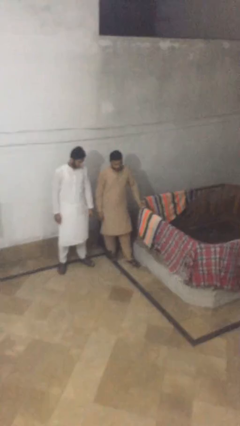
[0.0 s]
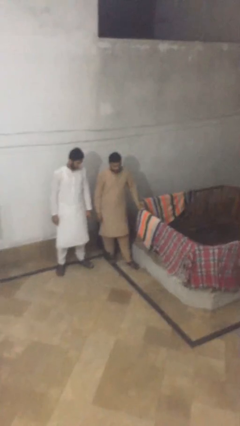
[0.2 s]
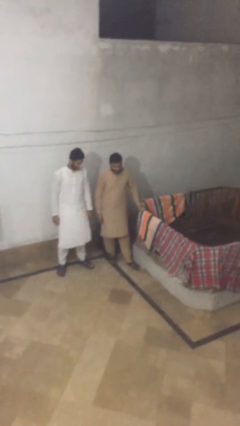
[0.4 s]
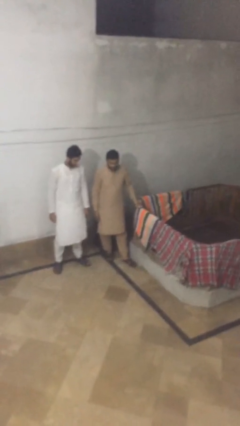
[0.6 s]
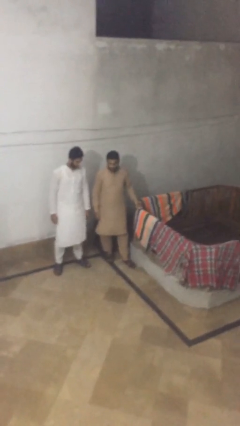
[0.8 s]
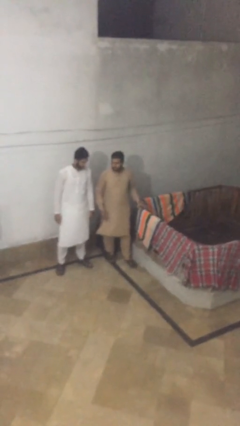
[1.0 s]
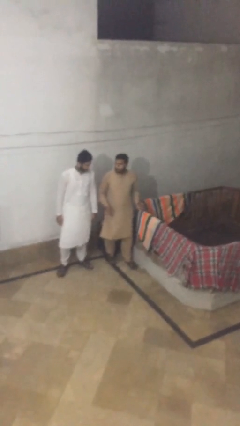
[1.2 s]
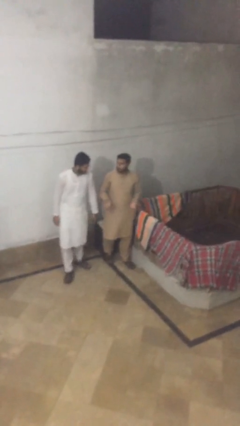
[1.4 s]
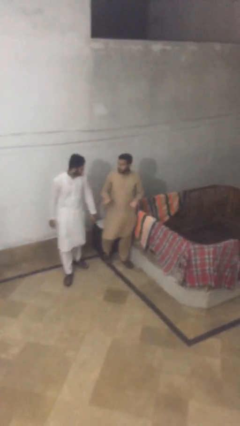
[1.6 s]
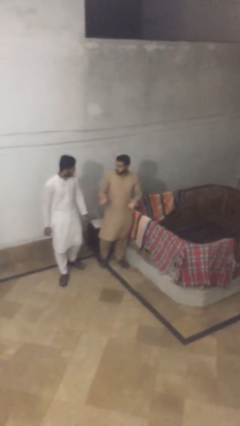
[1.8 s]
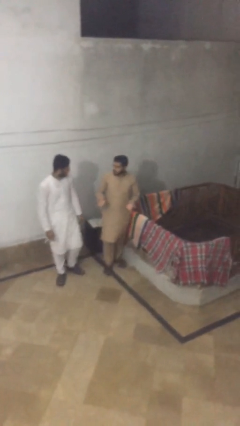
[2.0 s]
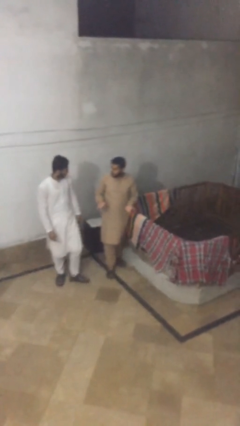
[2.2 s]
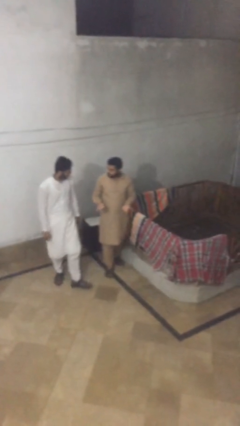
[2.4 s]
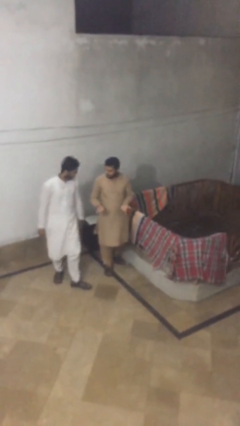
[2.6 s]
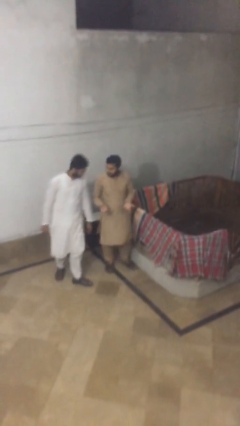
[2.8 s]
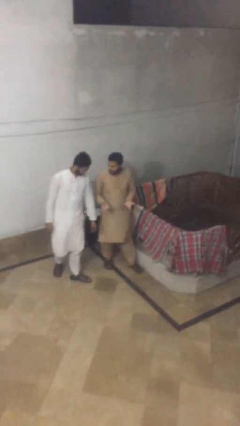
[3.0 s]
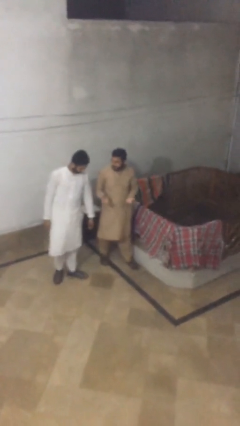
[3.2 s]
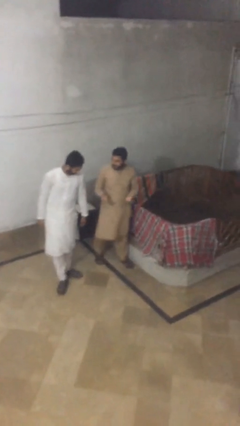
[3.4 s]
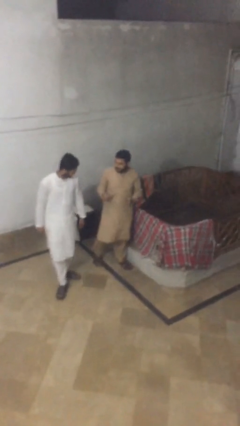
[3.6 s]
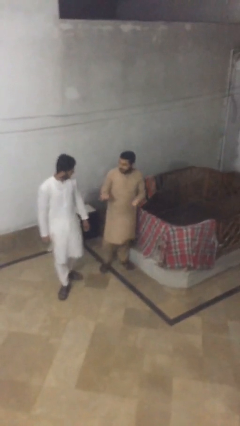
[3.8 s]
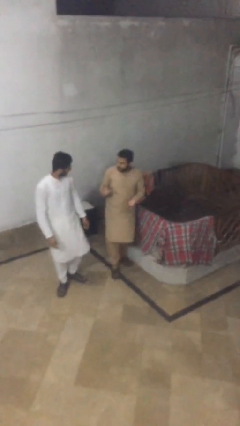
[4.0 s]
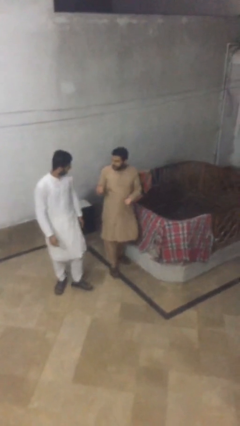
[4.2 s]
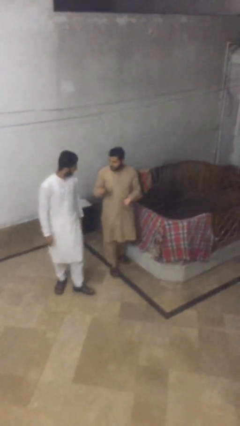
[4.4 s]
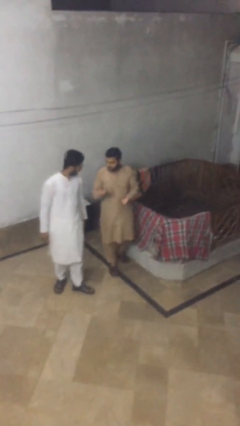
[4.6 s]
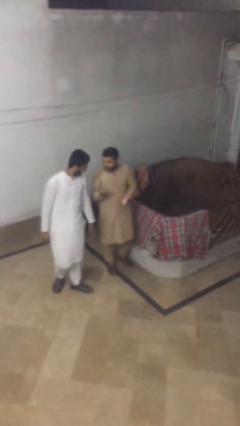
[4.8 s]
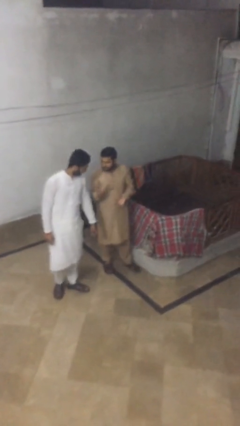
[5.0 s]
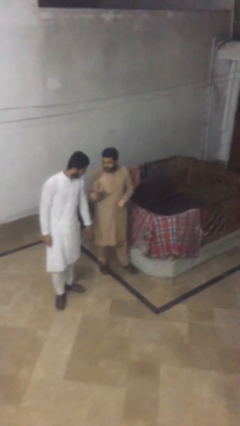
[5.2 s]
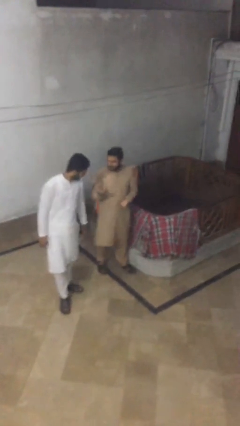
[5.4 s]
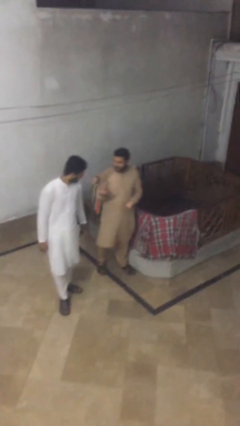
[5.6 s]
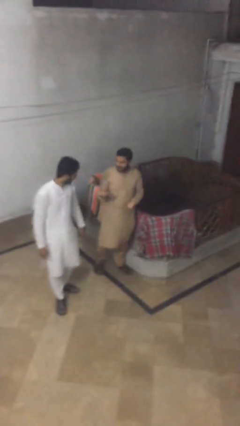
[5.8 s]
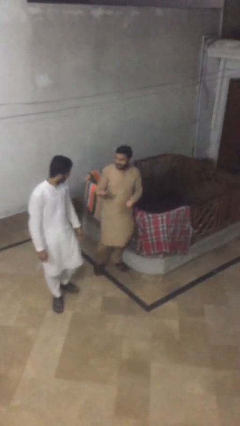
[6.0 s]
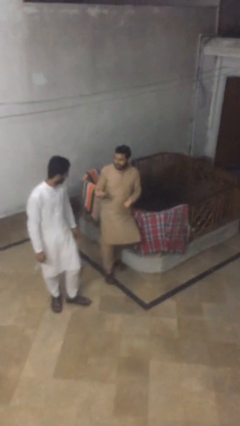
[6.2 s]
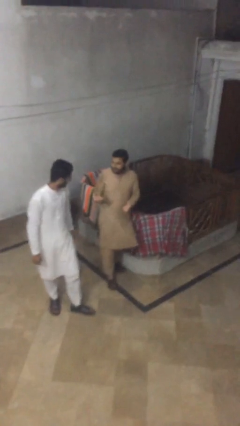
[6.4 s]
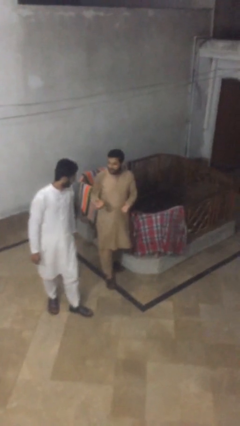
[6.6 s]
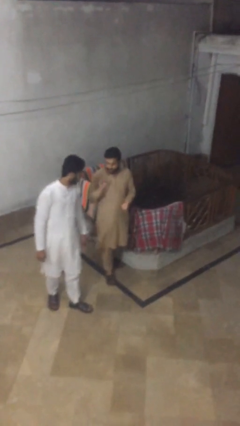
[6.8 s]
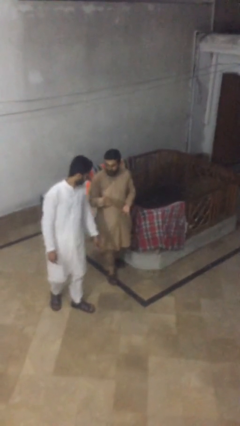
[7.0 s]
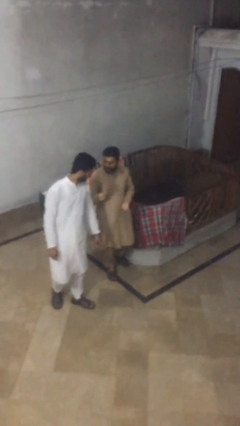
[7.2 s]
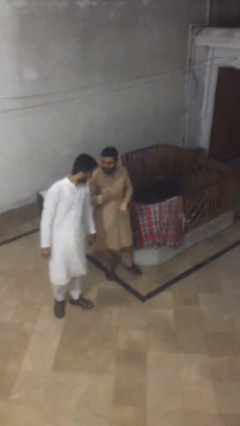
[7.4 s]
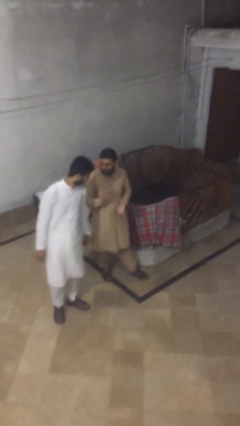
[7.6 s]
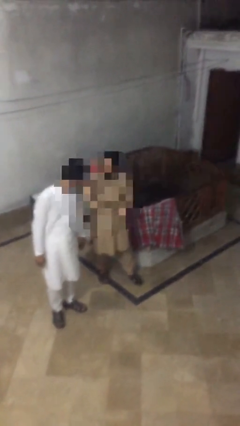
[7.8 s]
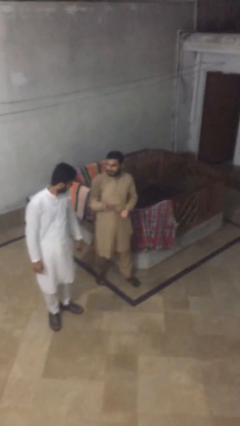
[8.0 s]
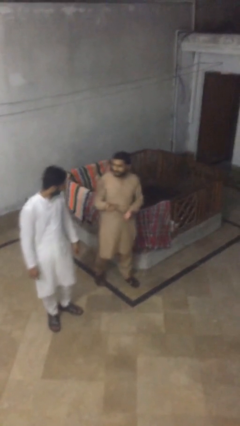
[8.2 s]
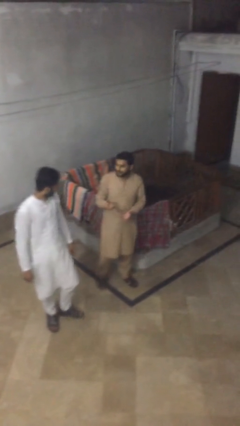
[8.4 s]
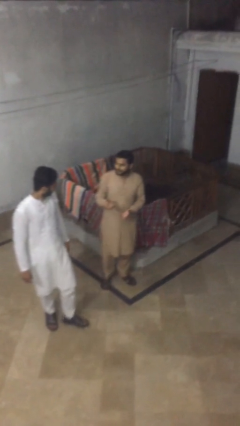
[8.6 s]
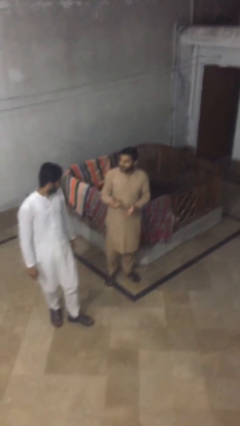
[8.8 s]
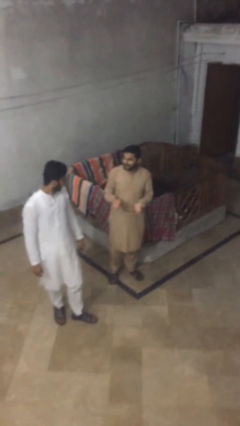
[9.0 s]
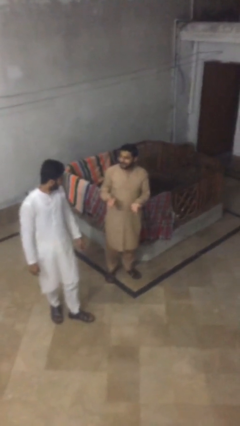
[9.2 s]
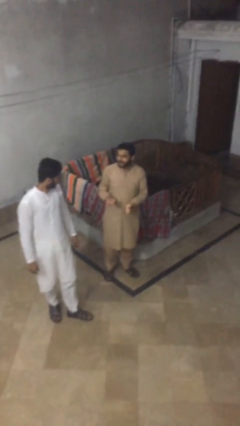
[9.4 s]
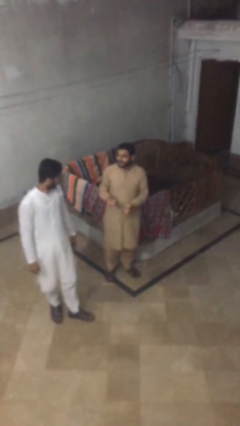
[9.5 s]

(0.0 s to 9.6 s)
person talks to person

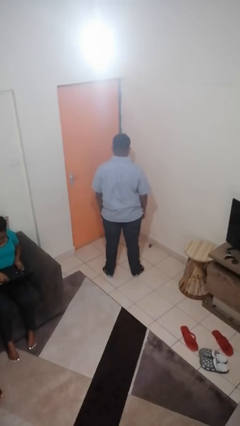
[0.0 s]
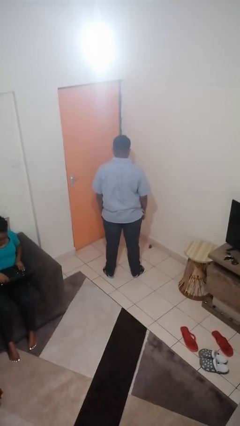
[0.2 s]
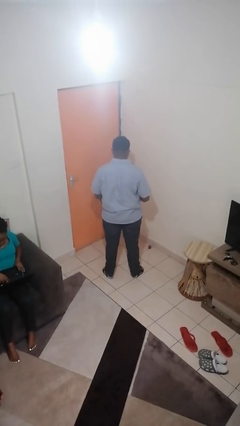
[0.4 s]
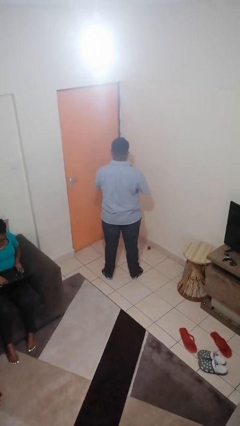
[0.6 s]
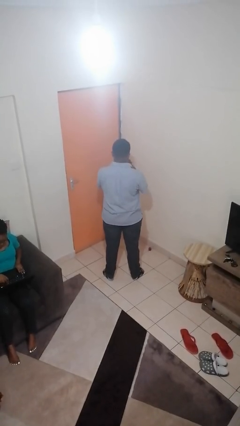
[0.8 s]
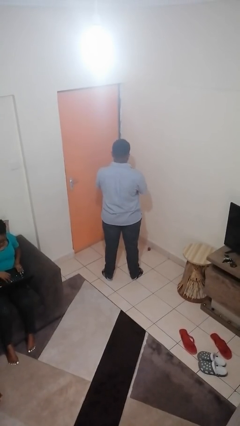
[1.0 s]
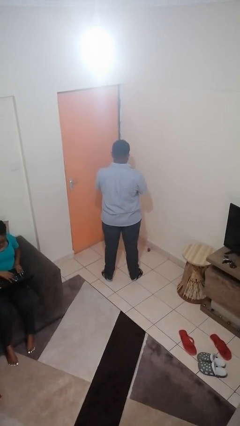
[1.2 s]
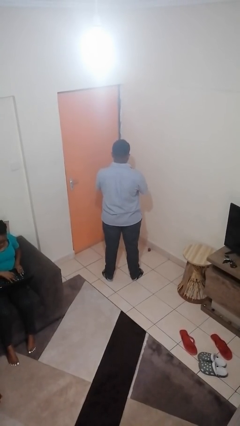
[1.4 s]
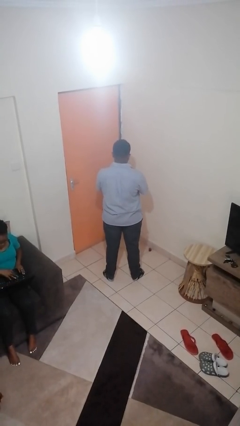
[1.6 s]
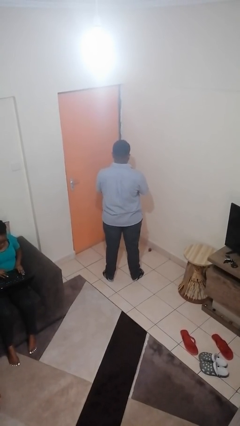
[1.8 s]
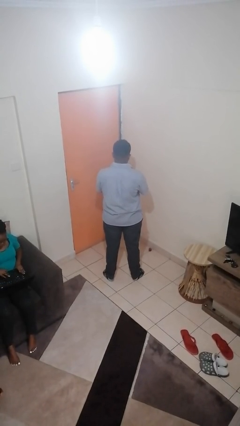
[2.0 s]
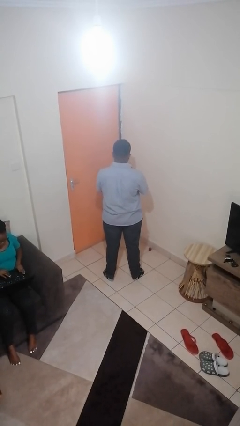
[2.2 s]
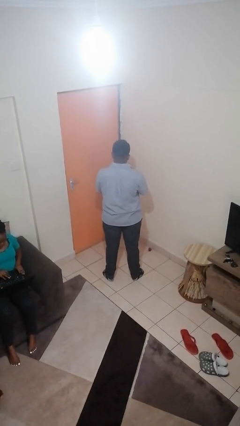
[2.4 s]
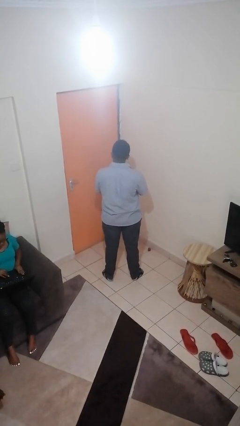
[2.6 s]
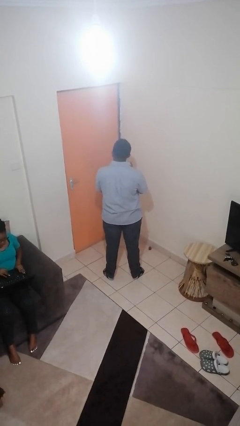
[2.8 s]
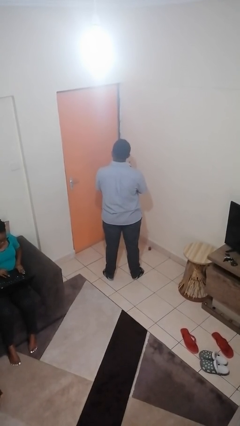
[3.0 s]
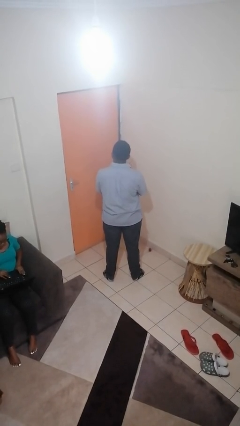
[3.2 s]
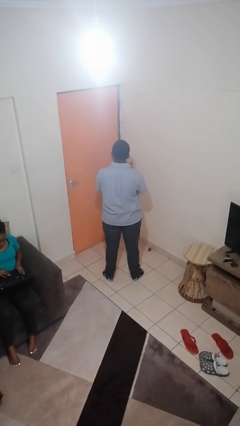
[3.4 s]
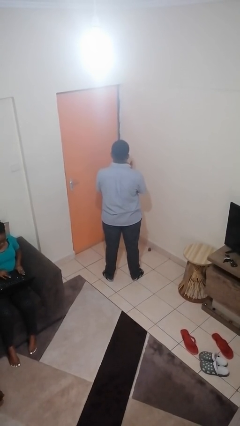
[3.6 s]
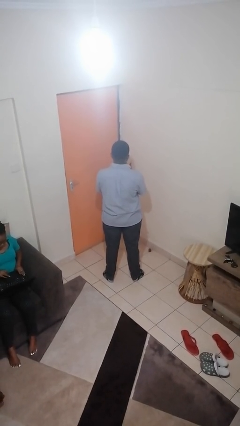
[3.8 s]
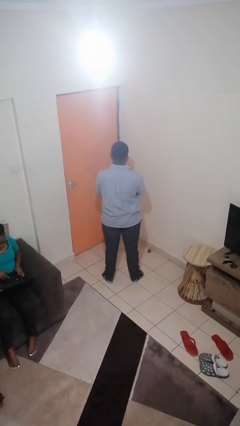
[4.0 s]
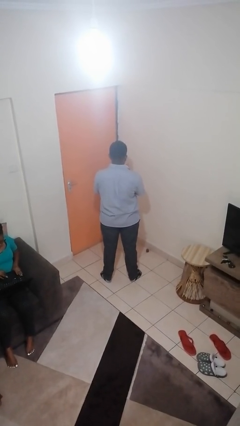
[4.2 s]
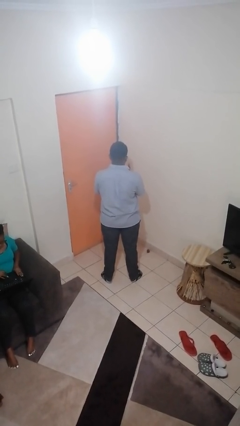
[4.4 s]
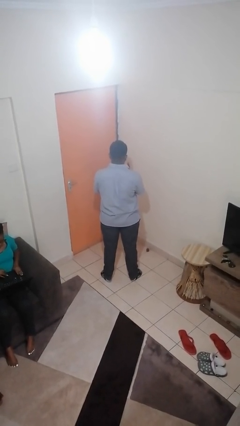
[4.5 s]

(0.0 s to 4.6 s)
person cracks knuckles

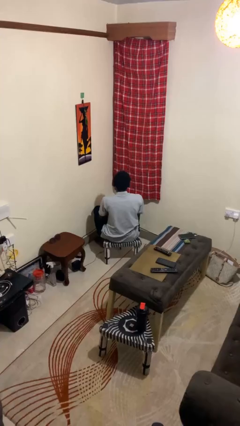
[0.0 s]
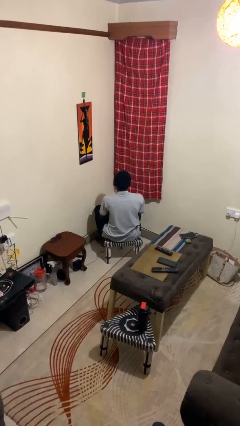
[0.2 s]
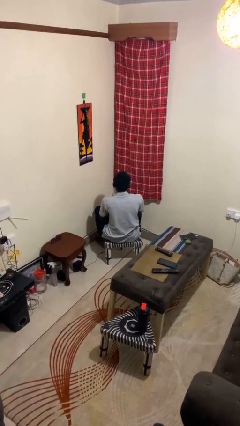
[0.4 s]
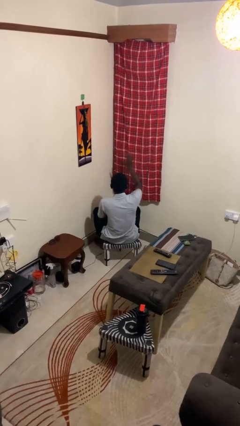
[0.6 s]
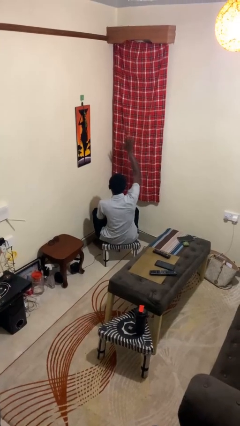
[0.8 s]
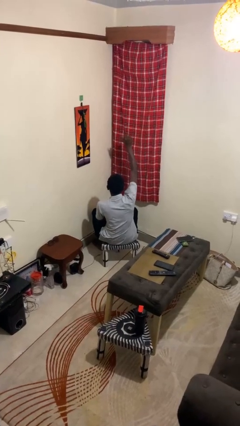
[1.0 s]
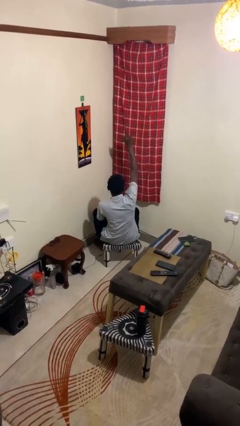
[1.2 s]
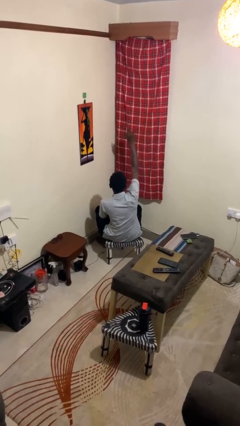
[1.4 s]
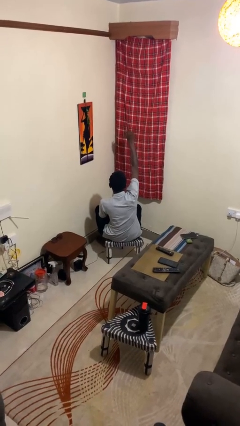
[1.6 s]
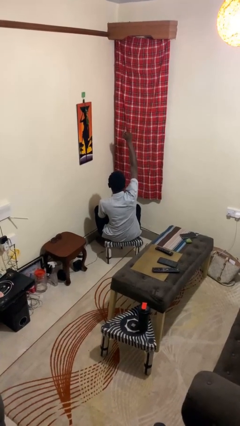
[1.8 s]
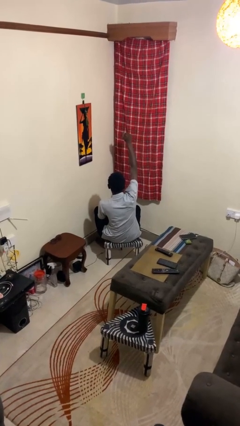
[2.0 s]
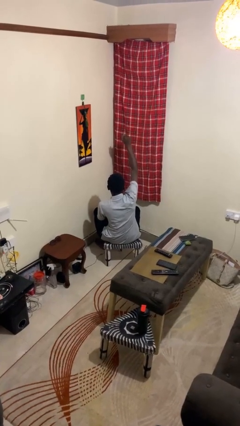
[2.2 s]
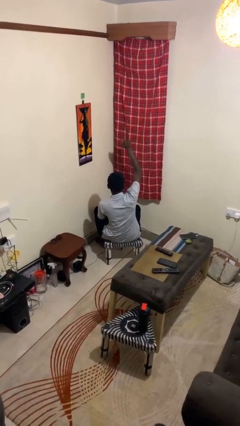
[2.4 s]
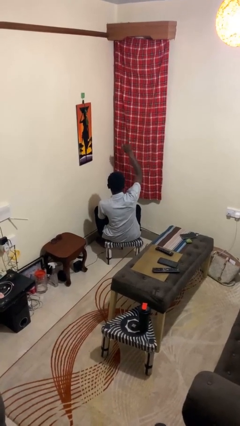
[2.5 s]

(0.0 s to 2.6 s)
person gestures come here

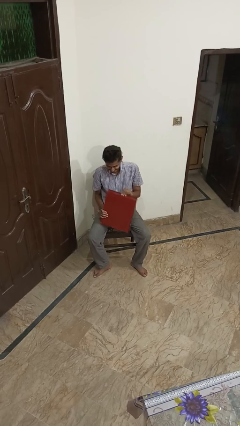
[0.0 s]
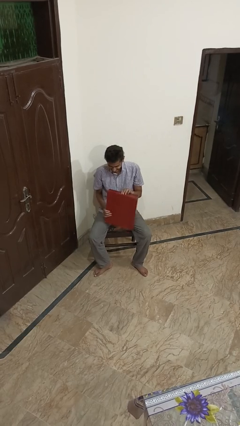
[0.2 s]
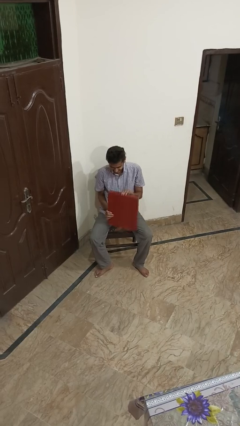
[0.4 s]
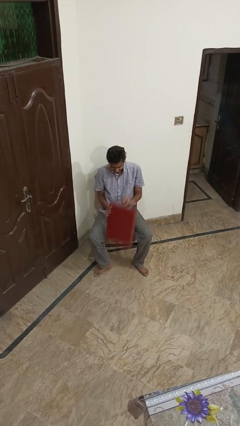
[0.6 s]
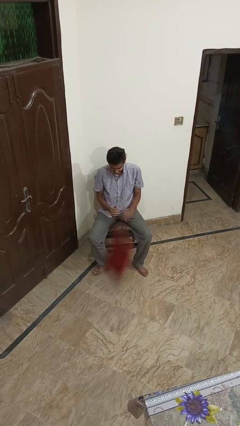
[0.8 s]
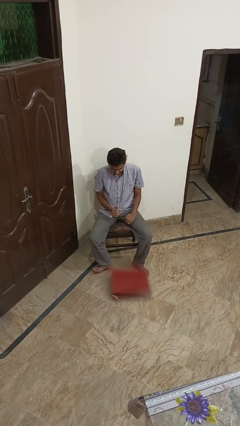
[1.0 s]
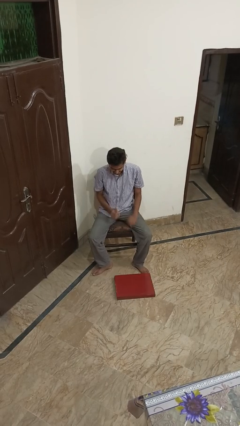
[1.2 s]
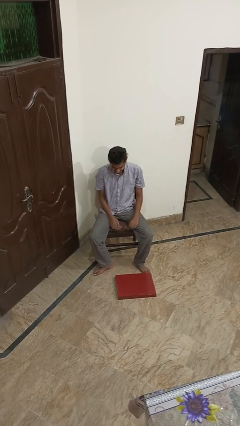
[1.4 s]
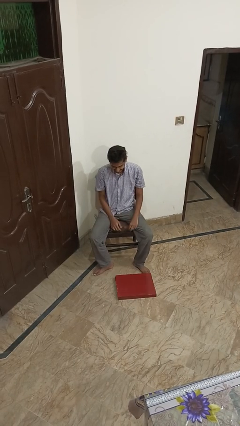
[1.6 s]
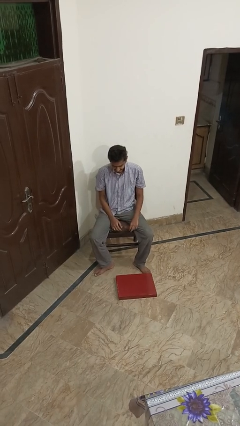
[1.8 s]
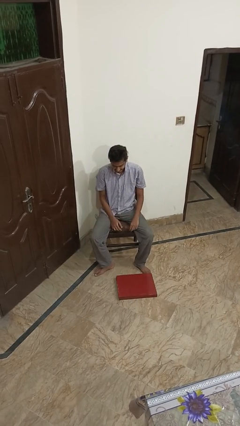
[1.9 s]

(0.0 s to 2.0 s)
person drops object
